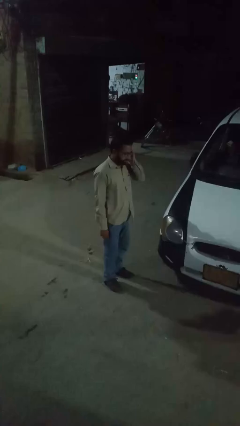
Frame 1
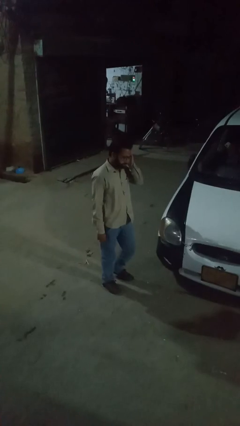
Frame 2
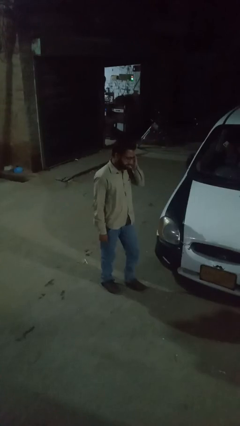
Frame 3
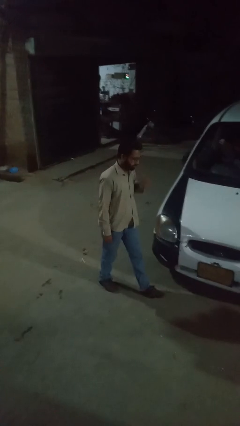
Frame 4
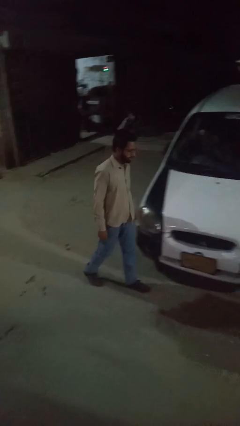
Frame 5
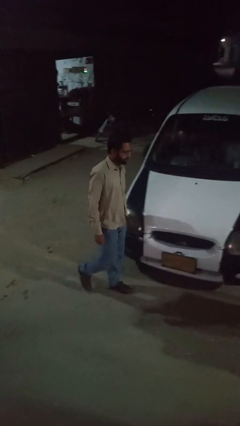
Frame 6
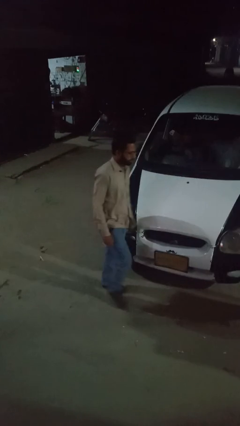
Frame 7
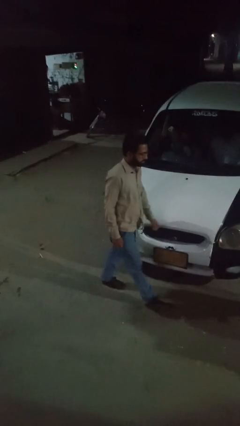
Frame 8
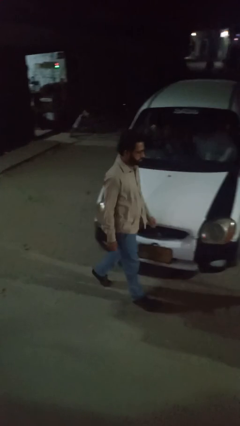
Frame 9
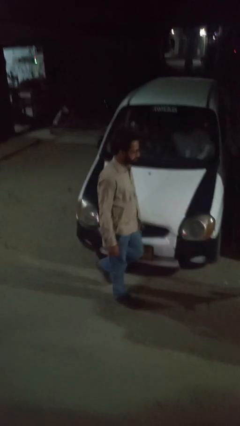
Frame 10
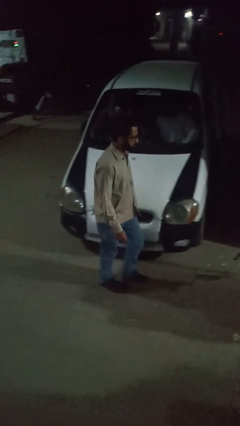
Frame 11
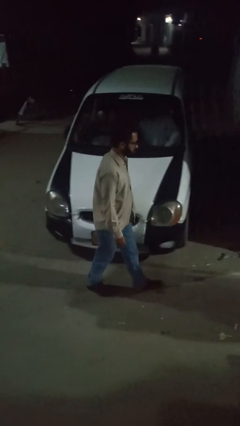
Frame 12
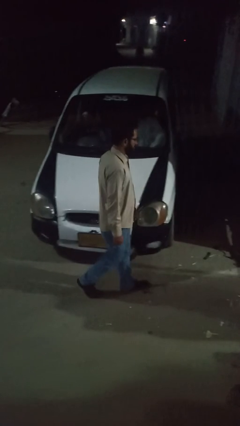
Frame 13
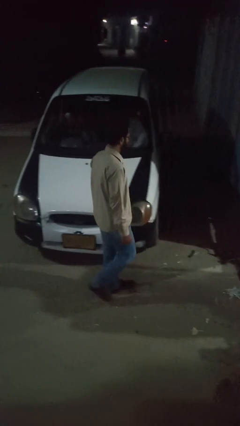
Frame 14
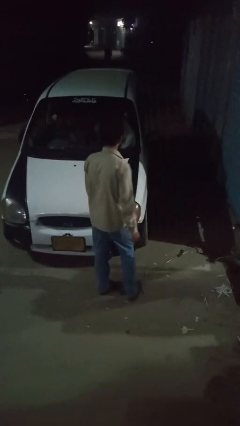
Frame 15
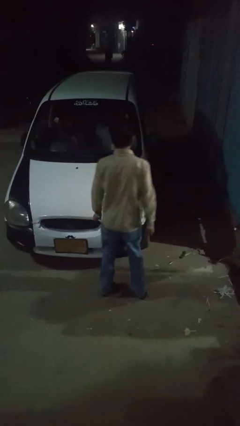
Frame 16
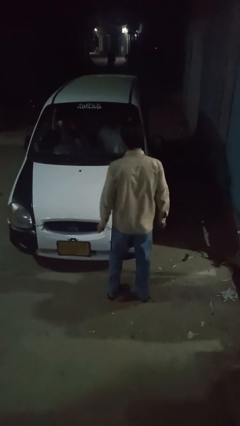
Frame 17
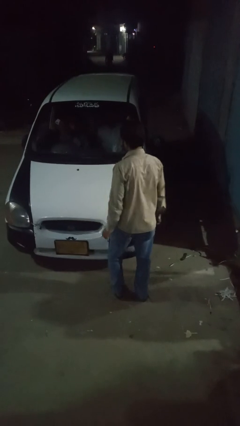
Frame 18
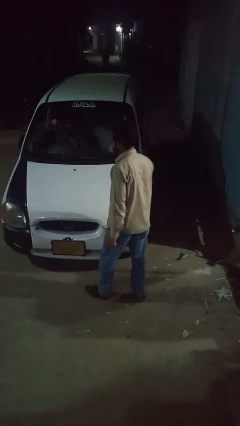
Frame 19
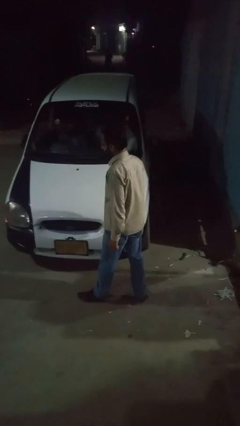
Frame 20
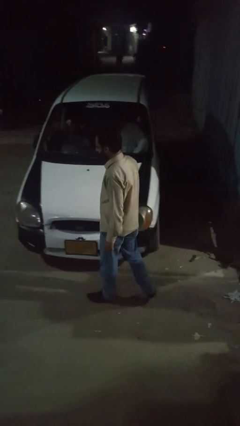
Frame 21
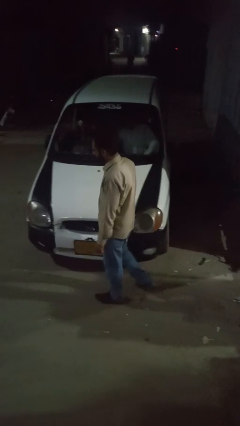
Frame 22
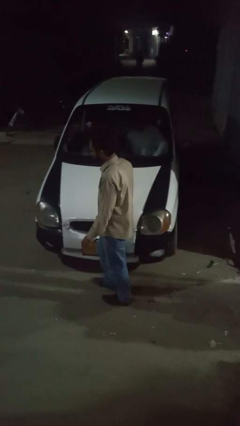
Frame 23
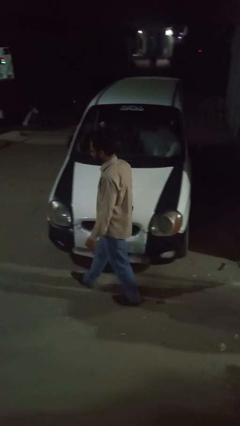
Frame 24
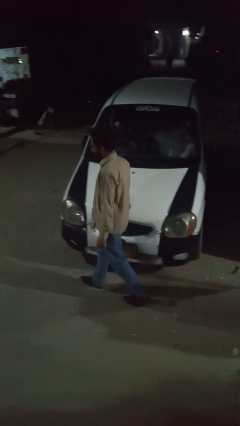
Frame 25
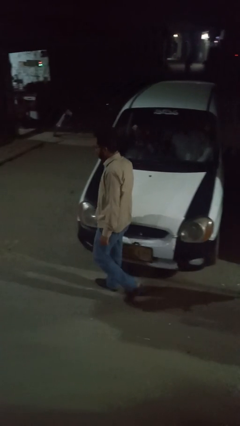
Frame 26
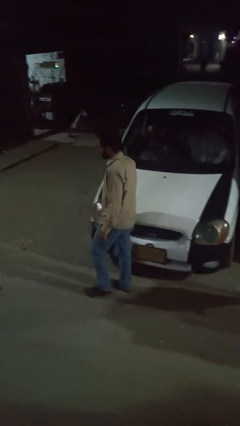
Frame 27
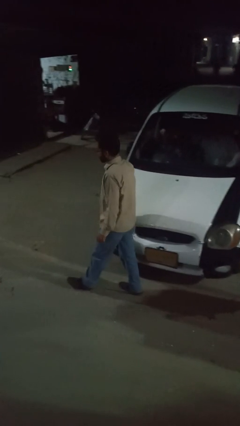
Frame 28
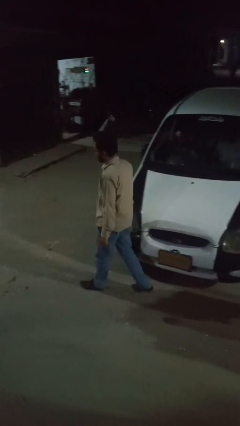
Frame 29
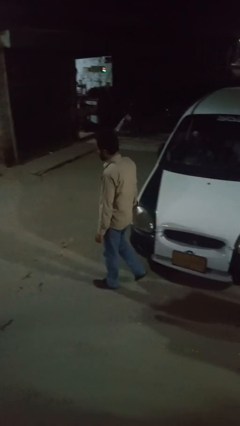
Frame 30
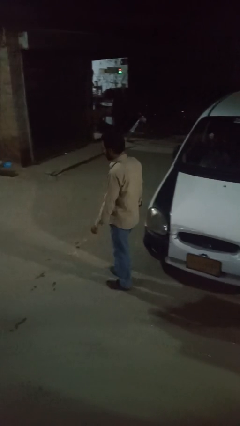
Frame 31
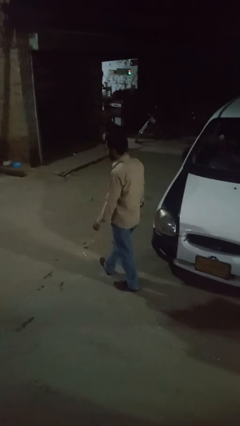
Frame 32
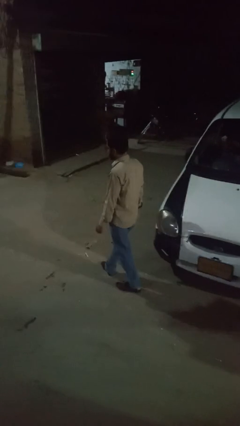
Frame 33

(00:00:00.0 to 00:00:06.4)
person walks around car

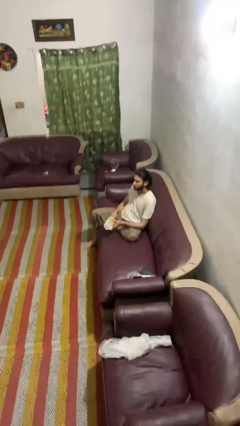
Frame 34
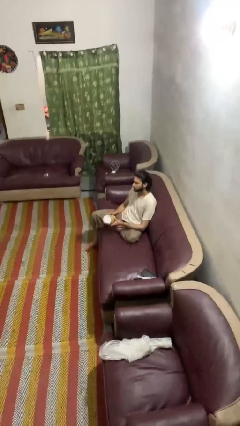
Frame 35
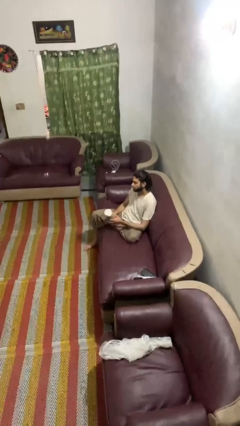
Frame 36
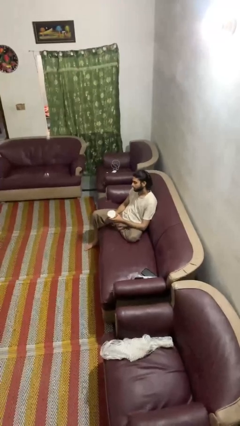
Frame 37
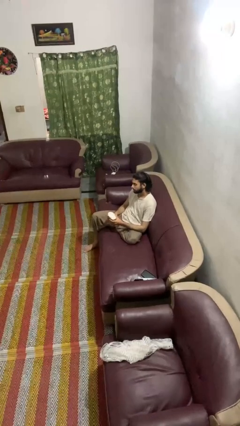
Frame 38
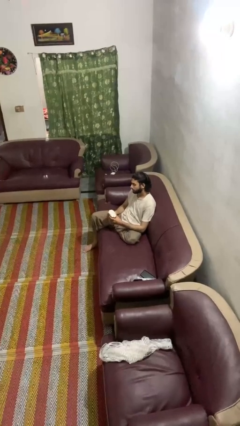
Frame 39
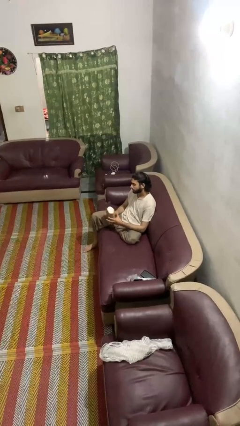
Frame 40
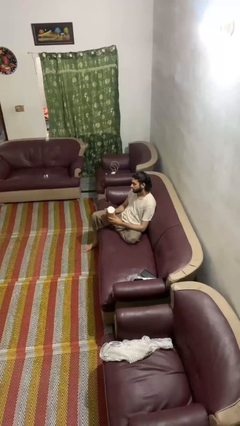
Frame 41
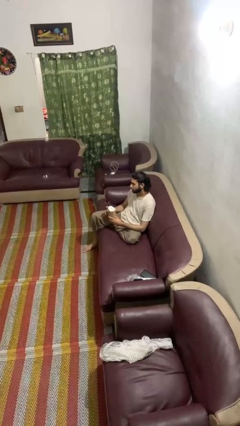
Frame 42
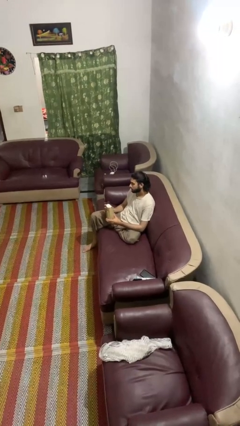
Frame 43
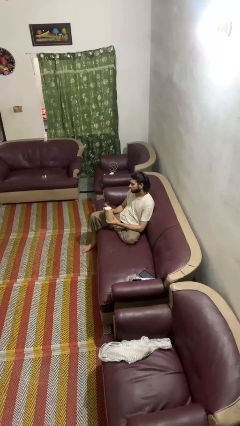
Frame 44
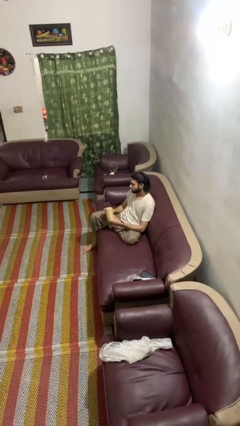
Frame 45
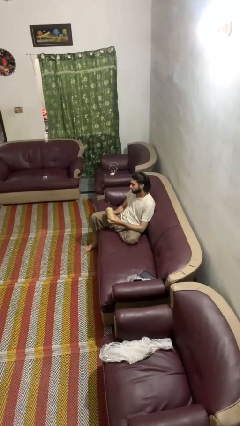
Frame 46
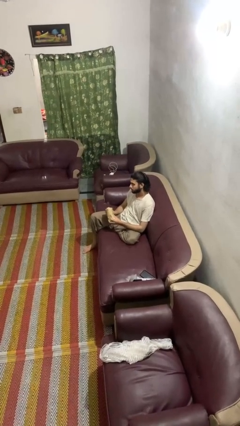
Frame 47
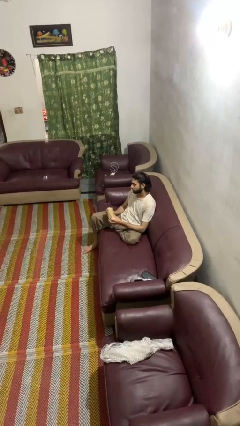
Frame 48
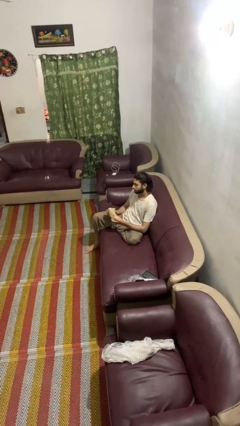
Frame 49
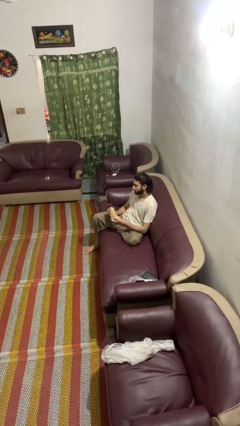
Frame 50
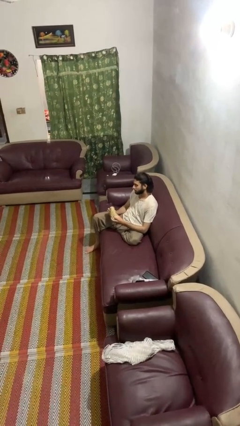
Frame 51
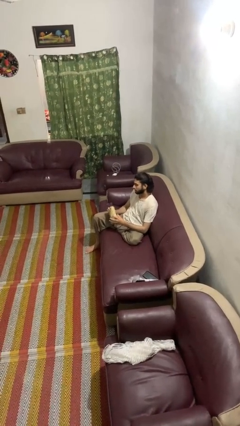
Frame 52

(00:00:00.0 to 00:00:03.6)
person squeezes object

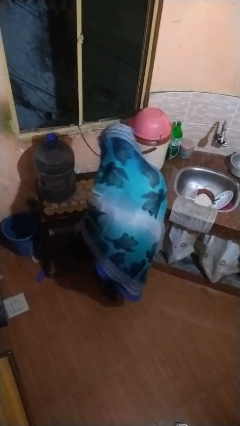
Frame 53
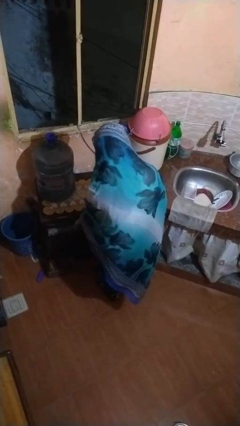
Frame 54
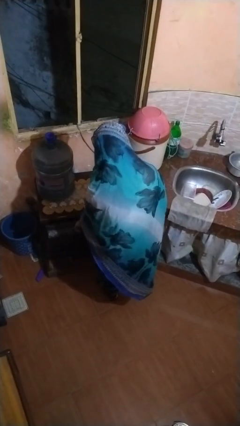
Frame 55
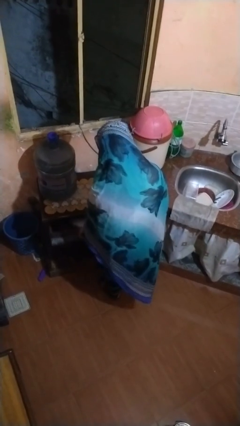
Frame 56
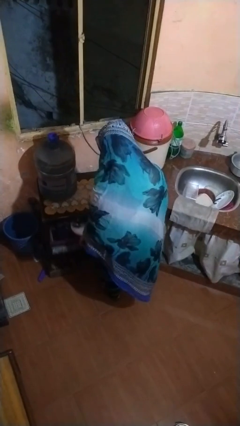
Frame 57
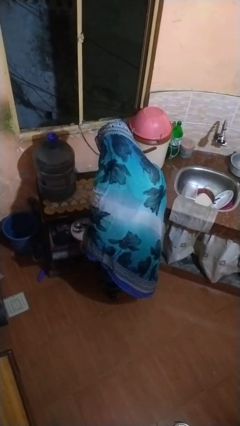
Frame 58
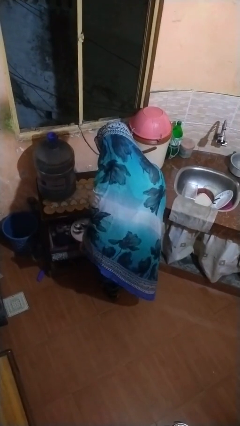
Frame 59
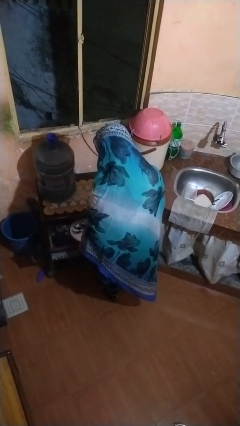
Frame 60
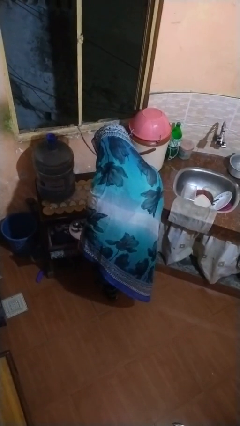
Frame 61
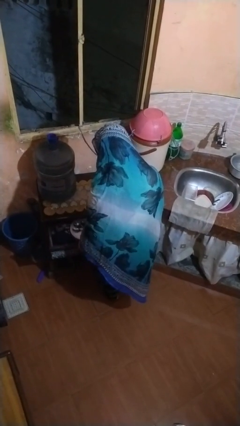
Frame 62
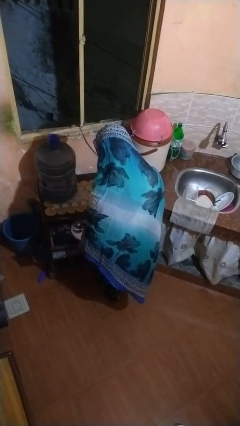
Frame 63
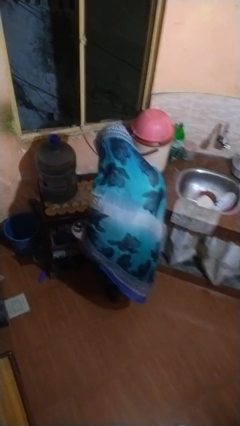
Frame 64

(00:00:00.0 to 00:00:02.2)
person opens kitchen drawer

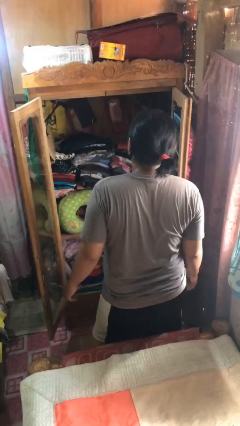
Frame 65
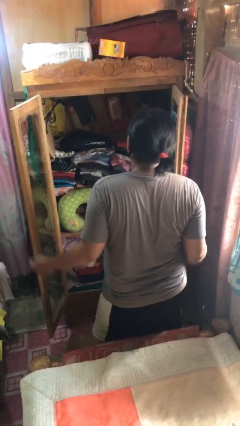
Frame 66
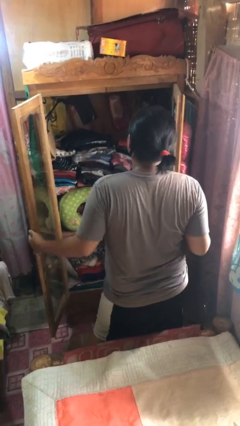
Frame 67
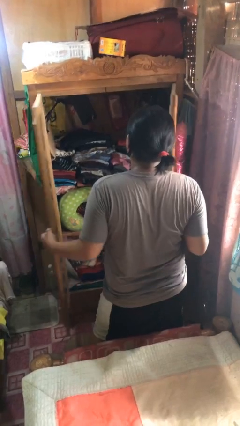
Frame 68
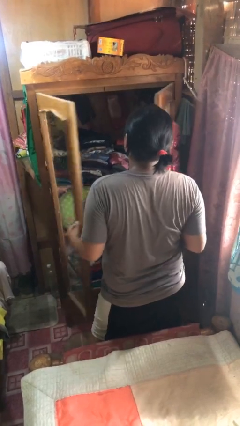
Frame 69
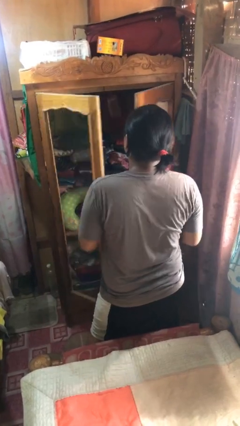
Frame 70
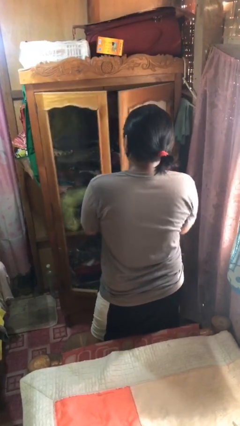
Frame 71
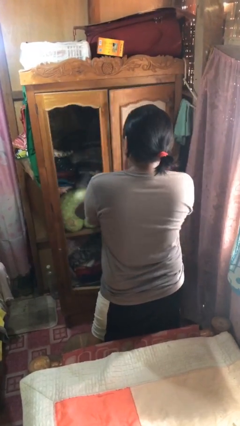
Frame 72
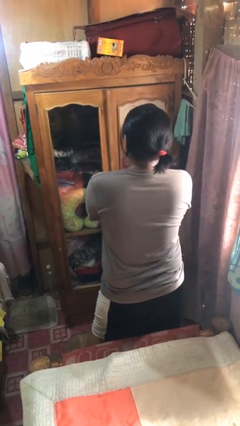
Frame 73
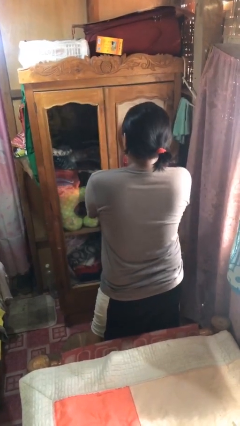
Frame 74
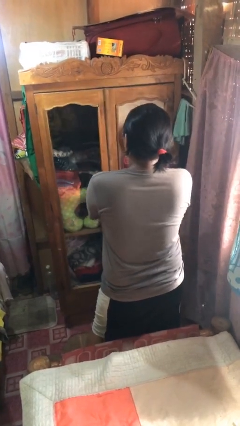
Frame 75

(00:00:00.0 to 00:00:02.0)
person closes closet door

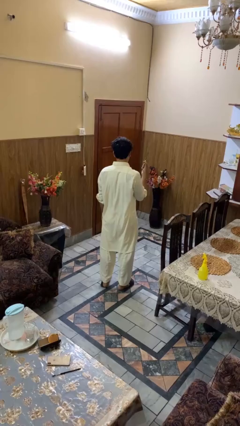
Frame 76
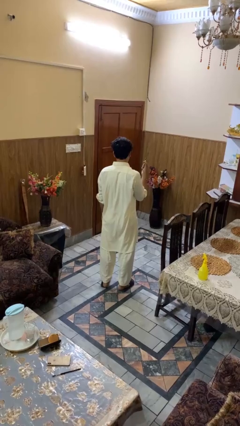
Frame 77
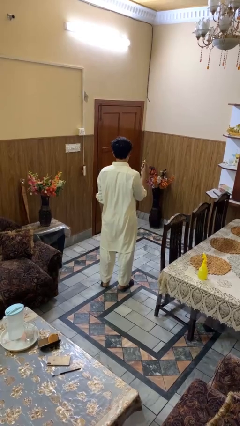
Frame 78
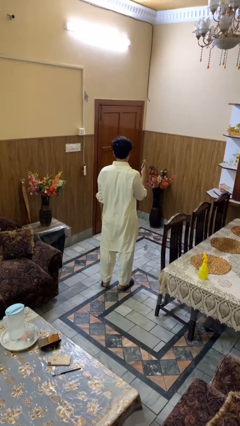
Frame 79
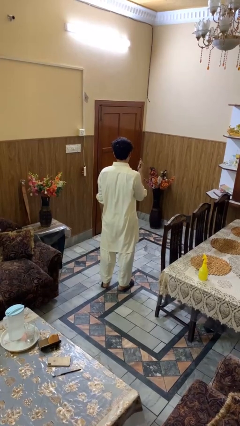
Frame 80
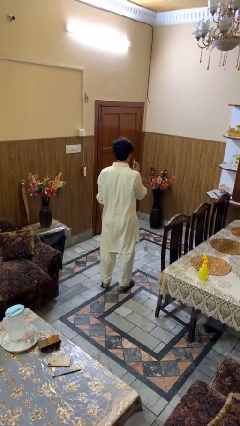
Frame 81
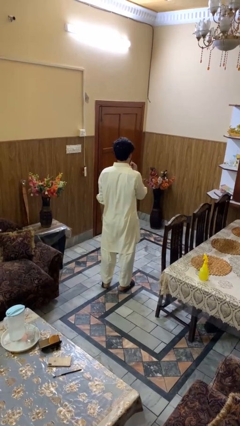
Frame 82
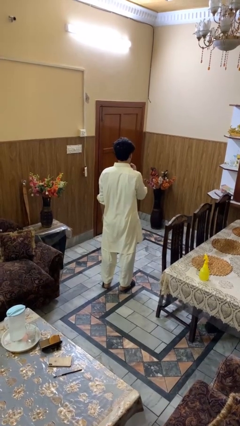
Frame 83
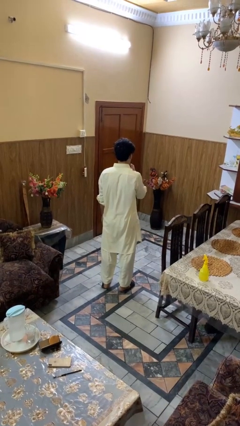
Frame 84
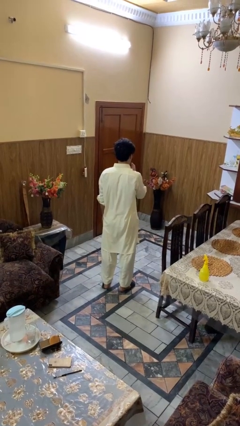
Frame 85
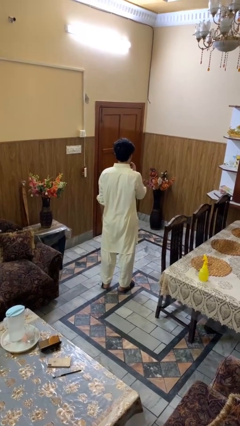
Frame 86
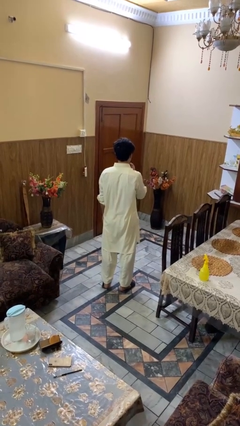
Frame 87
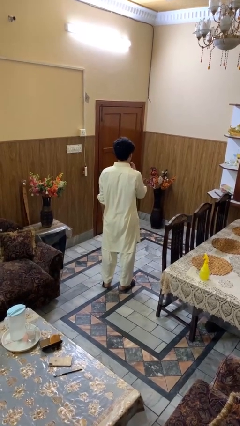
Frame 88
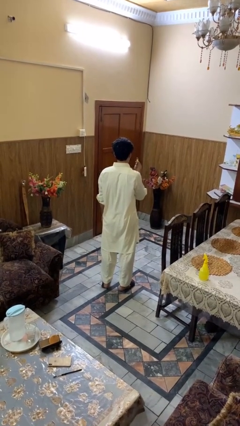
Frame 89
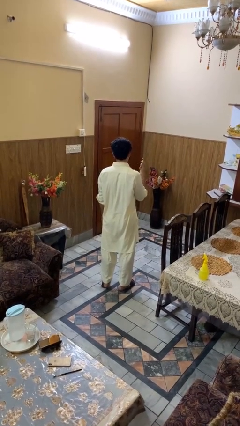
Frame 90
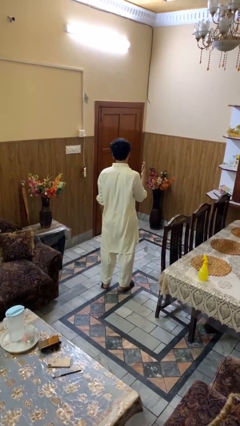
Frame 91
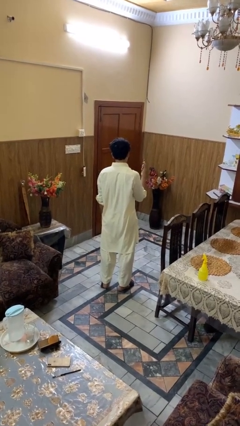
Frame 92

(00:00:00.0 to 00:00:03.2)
person applies lip makeup

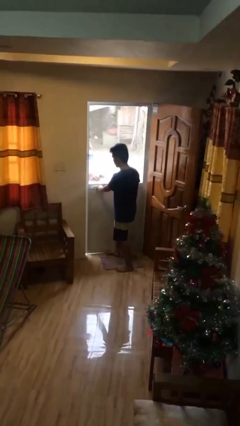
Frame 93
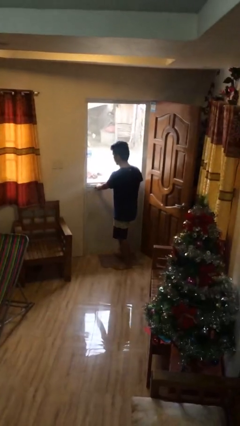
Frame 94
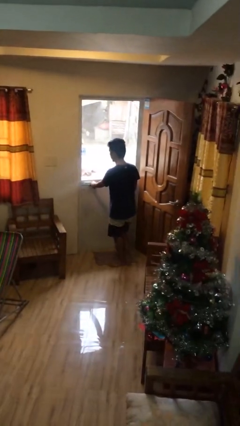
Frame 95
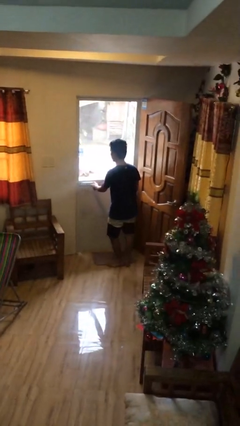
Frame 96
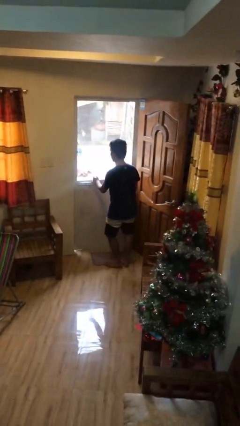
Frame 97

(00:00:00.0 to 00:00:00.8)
person closes facility door
